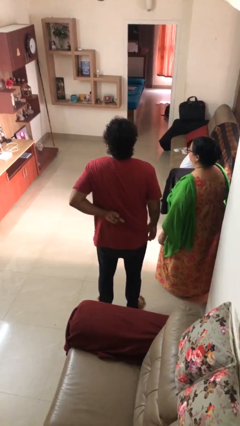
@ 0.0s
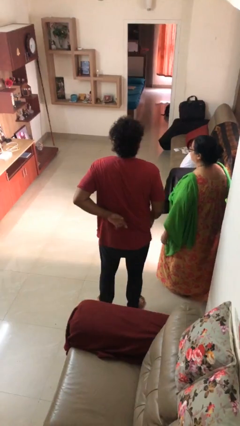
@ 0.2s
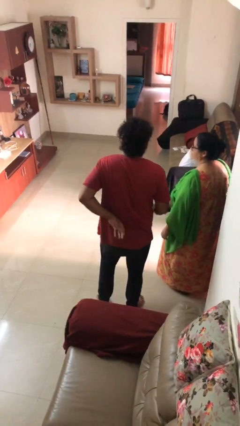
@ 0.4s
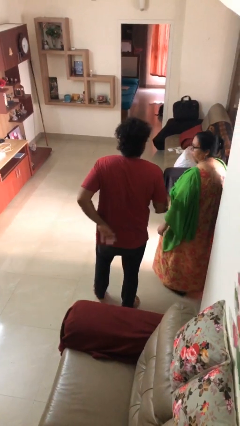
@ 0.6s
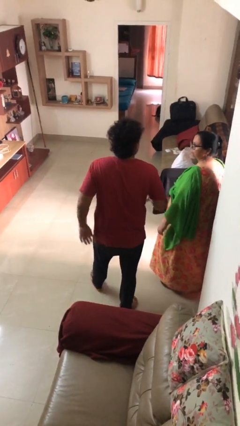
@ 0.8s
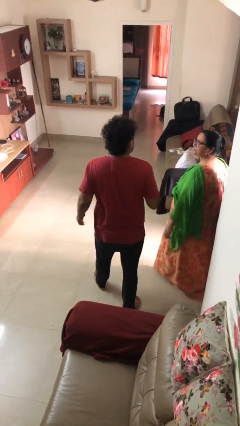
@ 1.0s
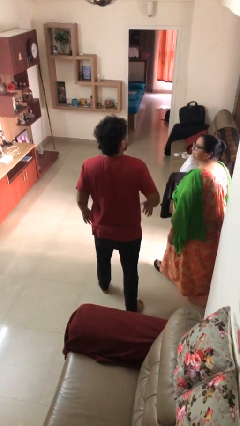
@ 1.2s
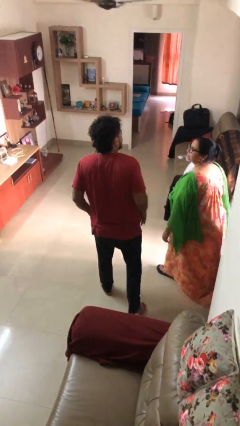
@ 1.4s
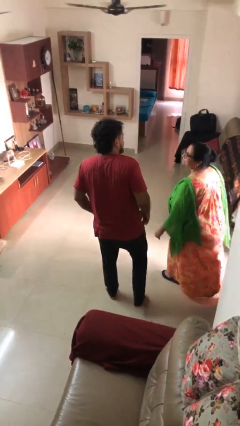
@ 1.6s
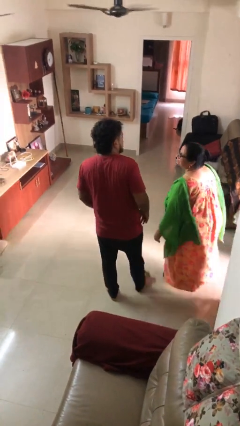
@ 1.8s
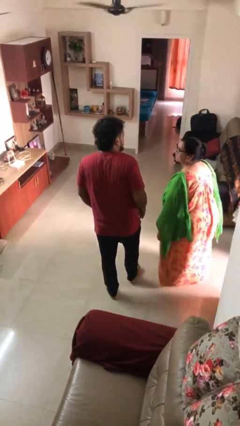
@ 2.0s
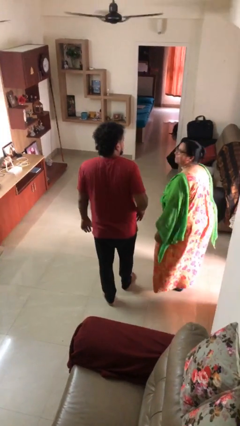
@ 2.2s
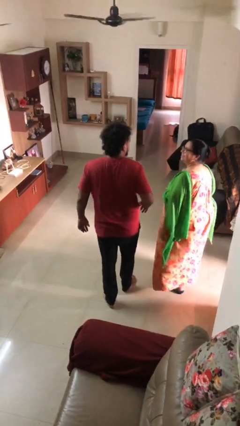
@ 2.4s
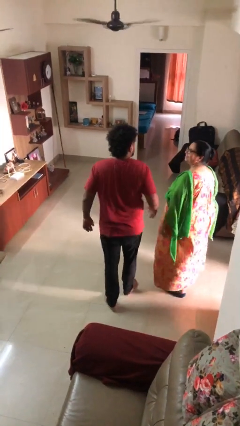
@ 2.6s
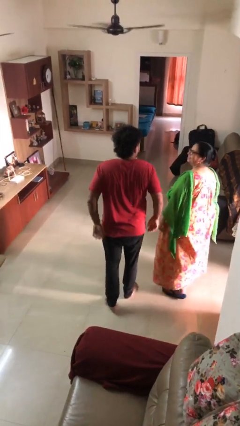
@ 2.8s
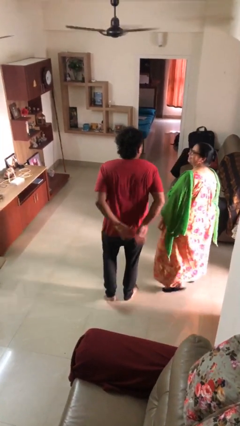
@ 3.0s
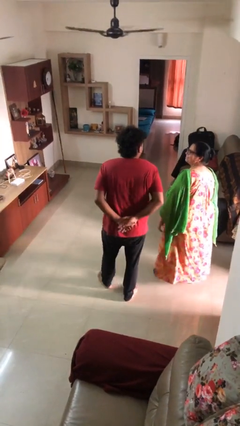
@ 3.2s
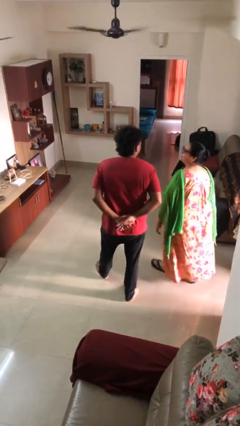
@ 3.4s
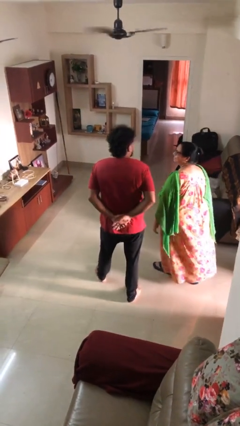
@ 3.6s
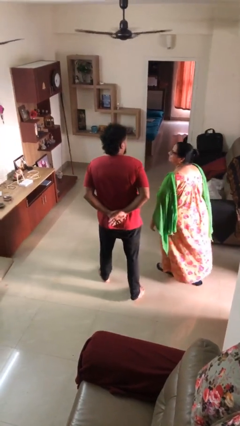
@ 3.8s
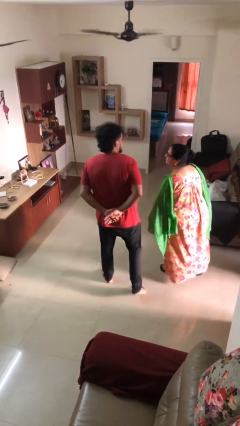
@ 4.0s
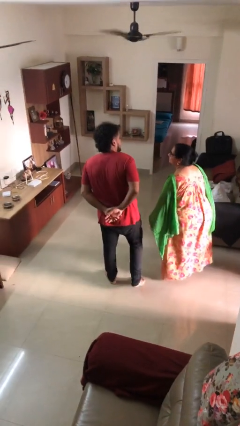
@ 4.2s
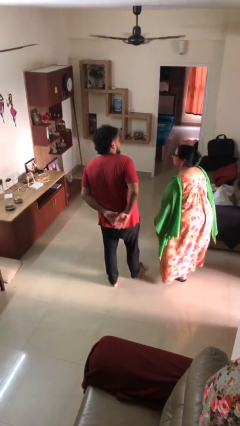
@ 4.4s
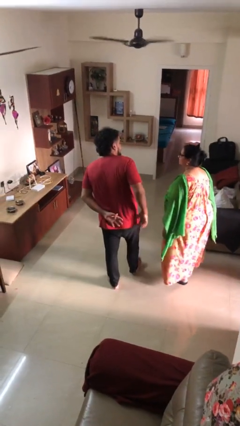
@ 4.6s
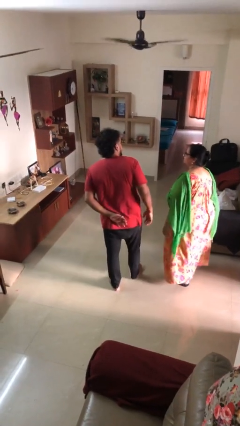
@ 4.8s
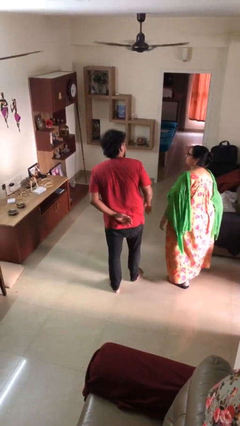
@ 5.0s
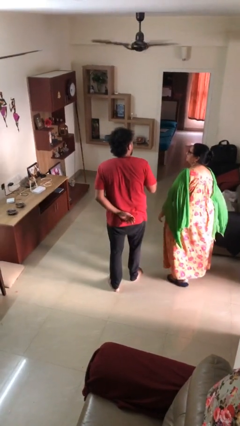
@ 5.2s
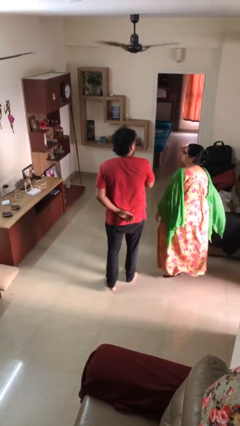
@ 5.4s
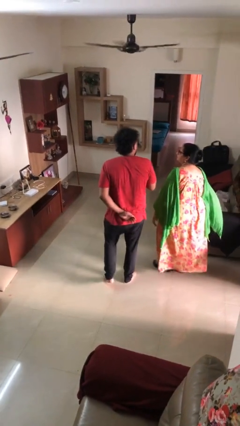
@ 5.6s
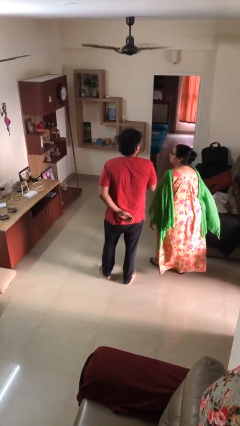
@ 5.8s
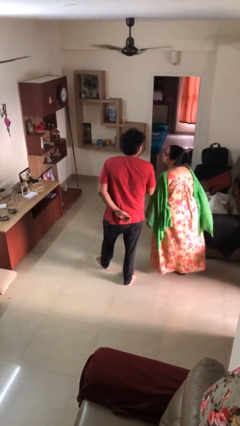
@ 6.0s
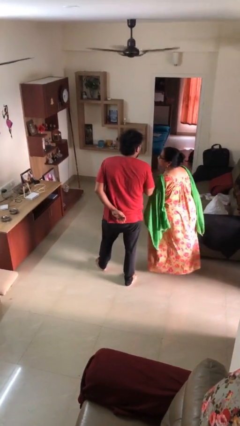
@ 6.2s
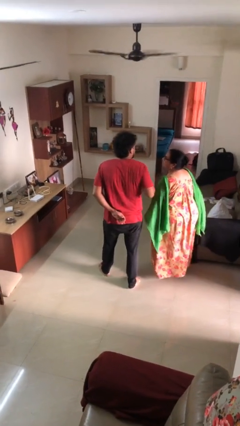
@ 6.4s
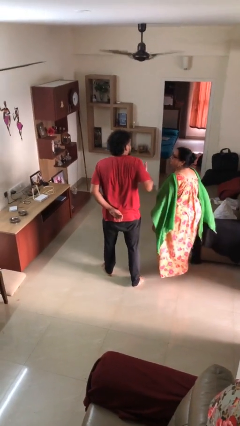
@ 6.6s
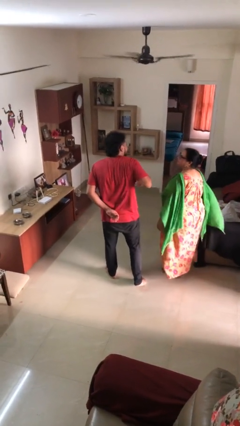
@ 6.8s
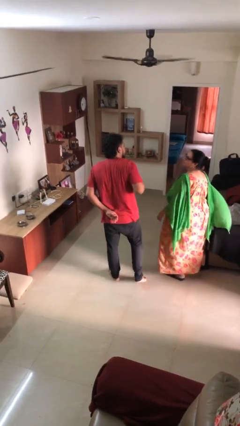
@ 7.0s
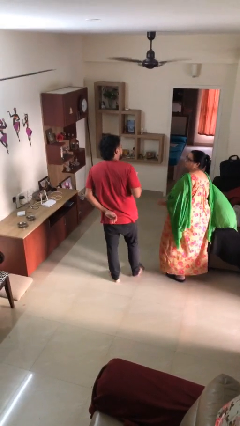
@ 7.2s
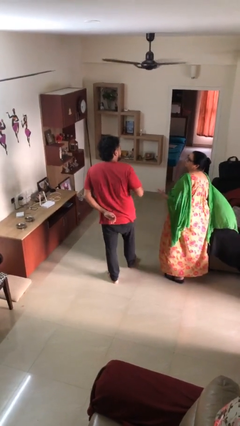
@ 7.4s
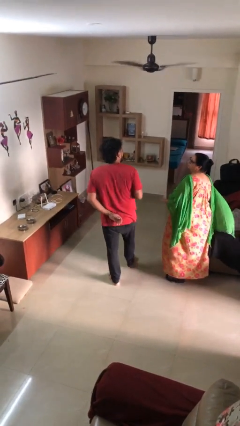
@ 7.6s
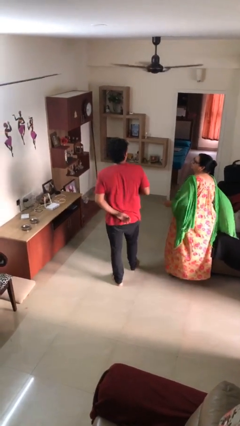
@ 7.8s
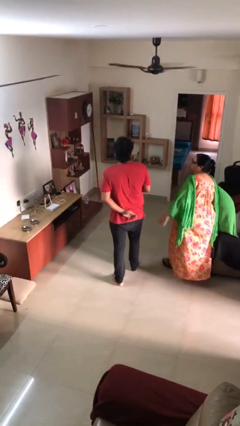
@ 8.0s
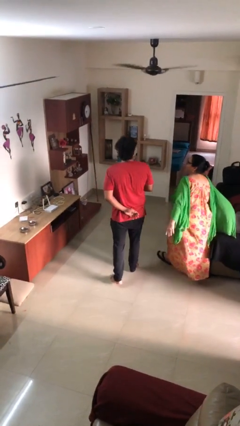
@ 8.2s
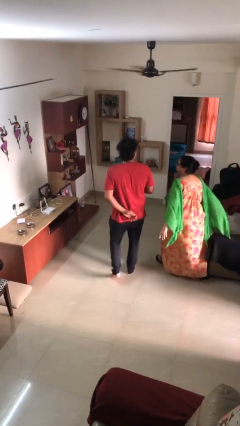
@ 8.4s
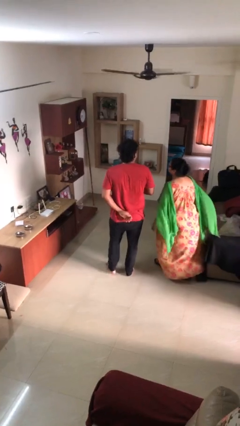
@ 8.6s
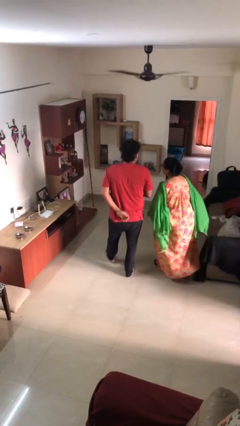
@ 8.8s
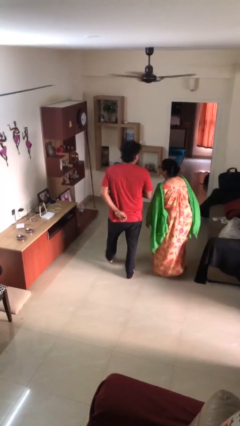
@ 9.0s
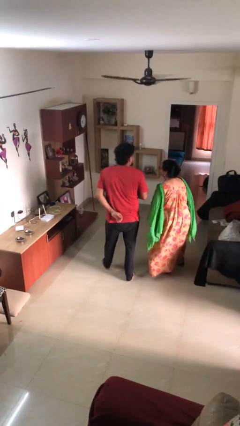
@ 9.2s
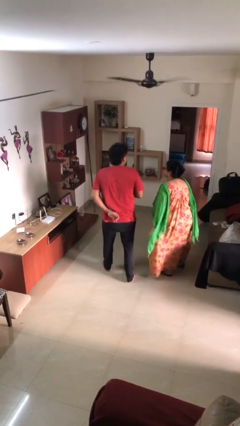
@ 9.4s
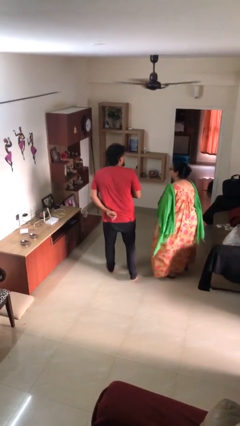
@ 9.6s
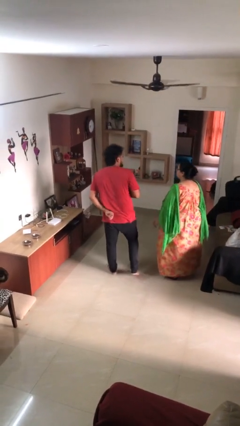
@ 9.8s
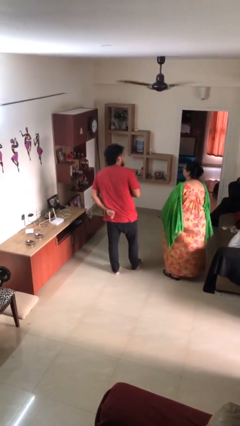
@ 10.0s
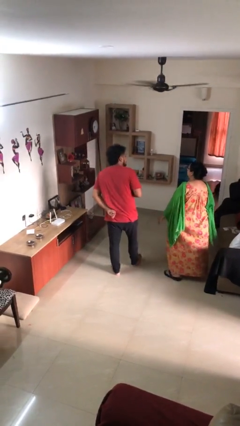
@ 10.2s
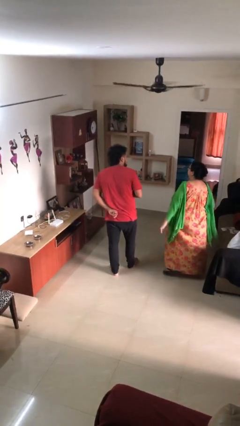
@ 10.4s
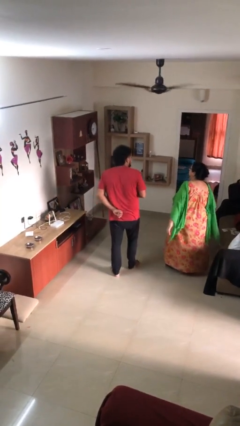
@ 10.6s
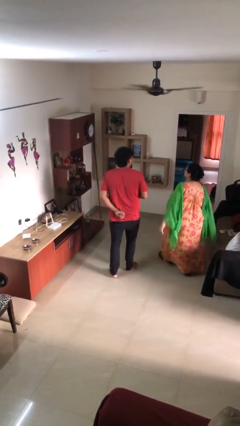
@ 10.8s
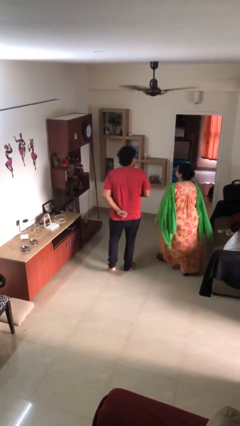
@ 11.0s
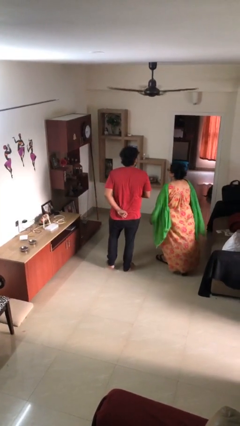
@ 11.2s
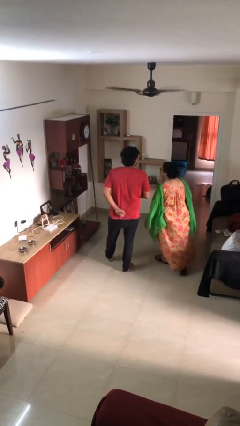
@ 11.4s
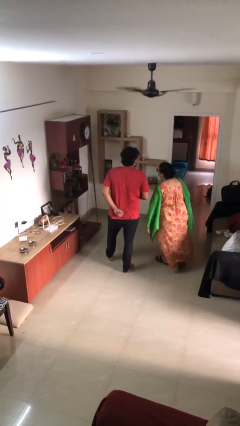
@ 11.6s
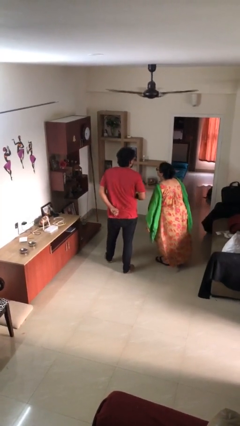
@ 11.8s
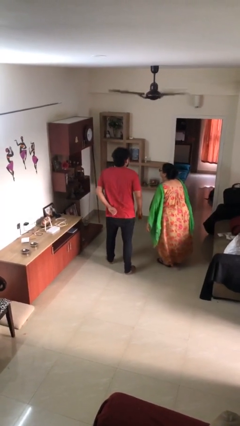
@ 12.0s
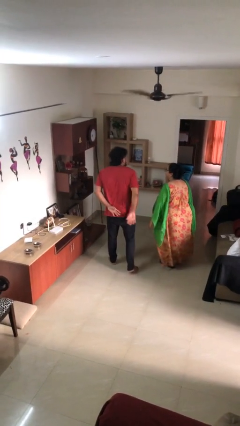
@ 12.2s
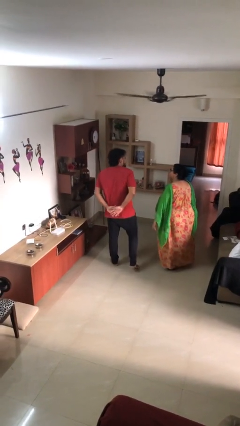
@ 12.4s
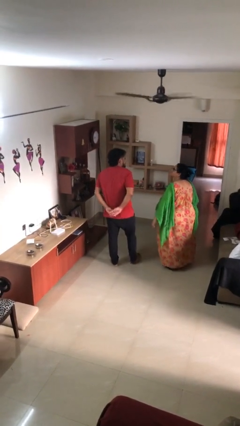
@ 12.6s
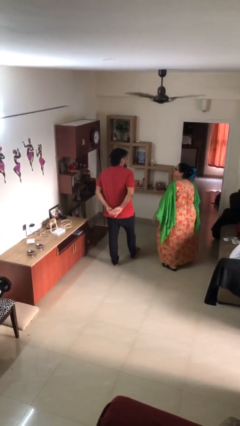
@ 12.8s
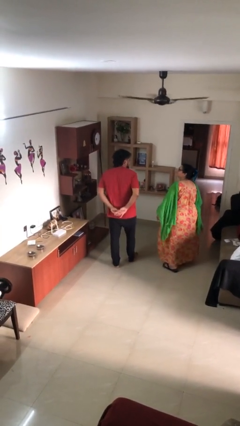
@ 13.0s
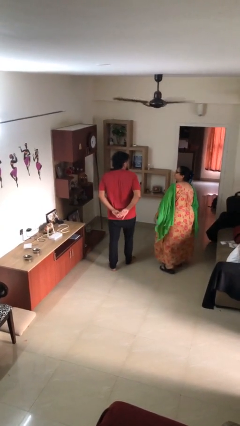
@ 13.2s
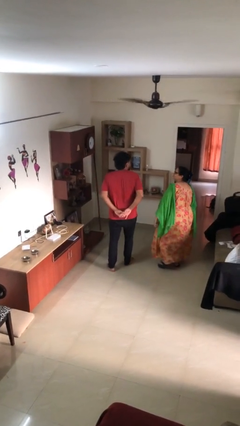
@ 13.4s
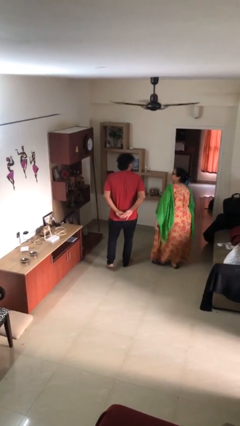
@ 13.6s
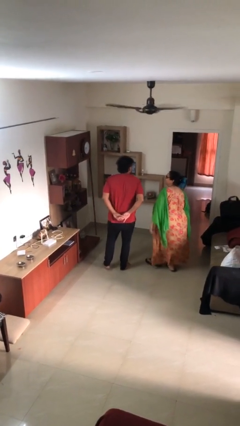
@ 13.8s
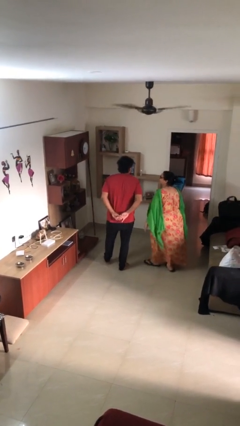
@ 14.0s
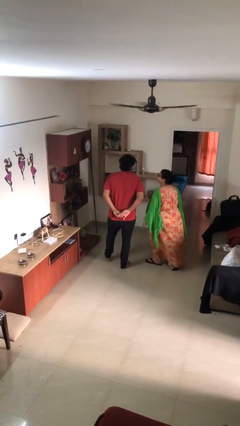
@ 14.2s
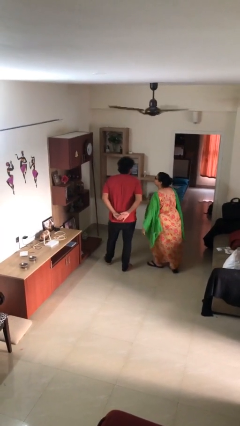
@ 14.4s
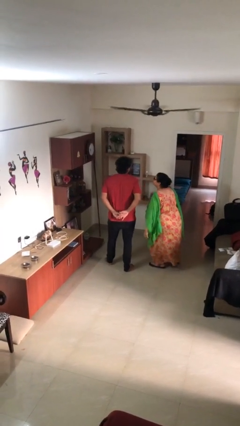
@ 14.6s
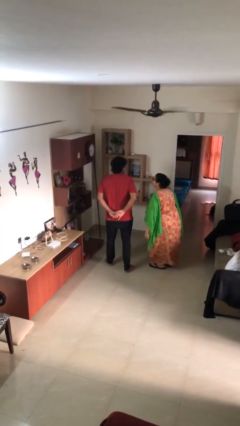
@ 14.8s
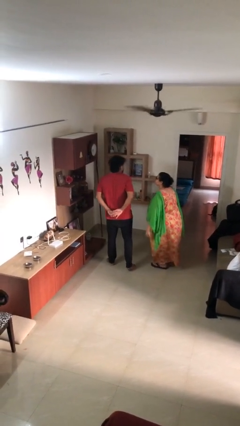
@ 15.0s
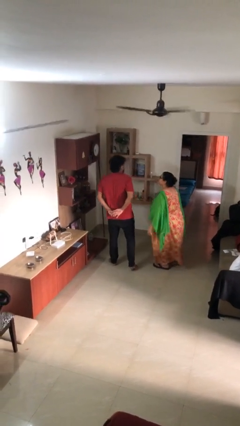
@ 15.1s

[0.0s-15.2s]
person talks to person

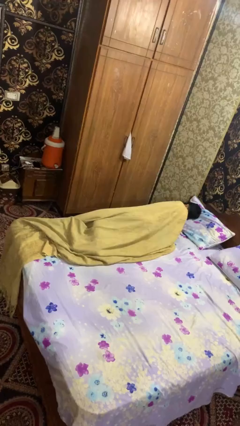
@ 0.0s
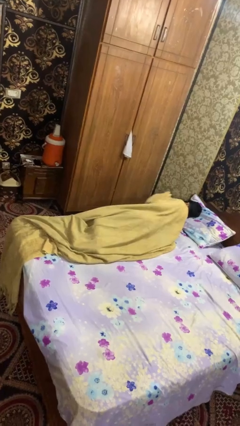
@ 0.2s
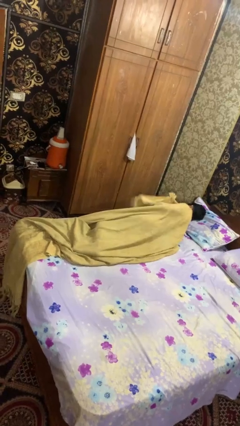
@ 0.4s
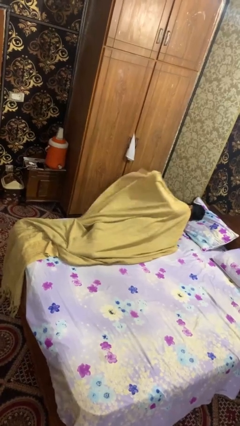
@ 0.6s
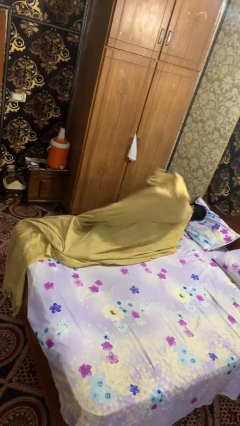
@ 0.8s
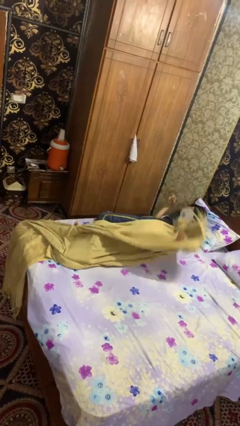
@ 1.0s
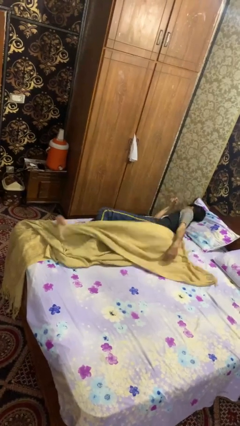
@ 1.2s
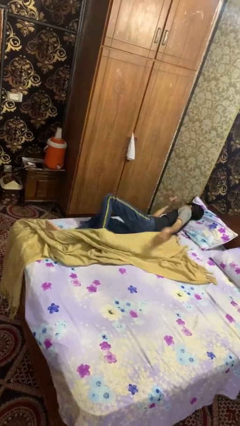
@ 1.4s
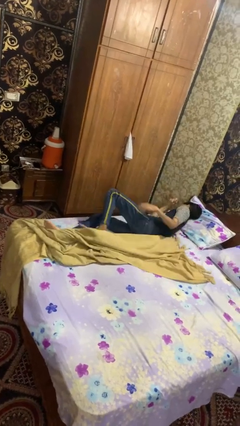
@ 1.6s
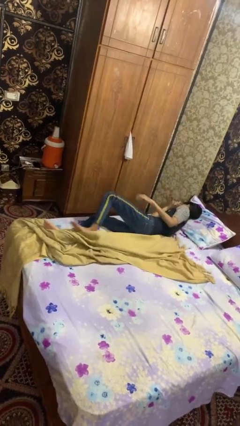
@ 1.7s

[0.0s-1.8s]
person uncovers with bedsheets

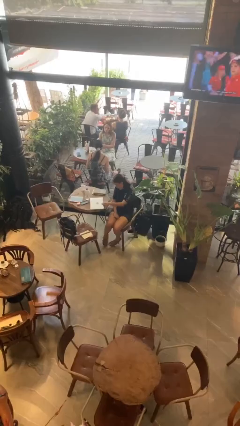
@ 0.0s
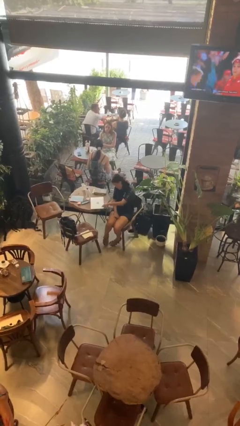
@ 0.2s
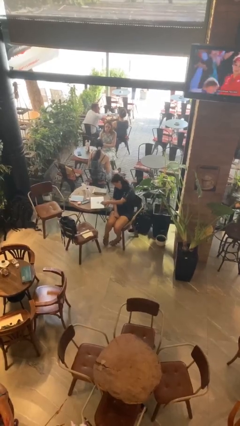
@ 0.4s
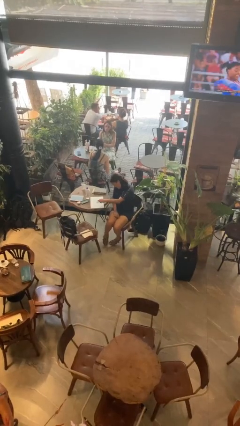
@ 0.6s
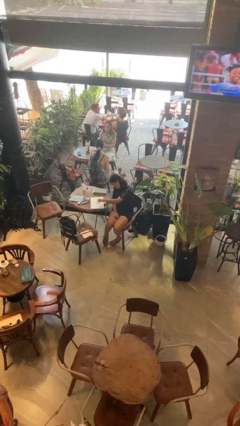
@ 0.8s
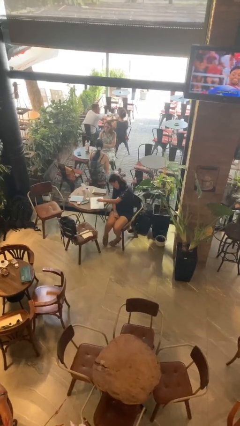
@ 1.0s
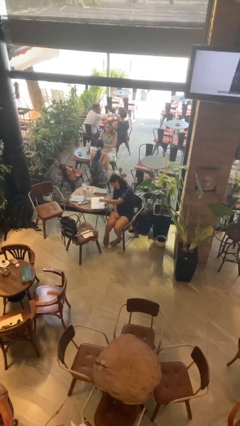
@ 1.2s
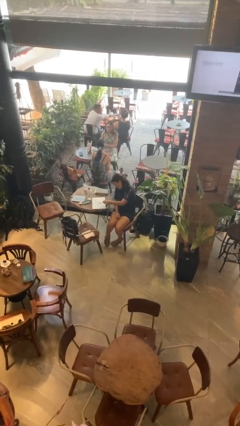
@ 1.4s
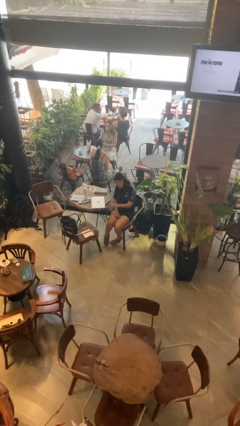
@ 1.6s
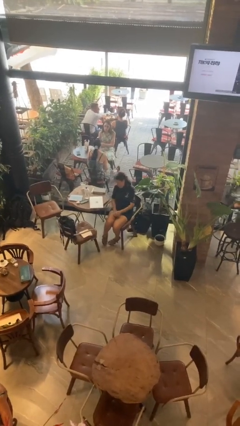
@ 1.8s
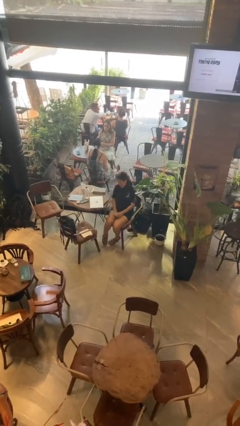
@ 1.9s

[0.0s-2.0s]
person taps object with finger
